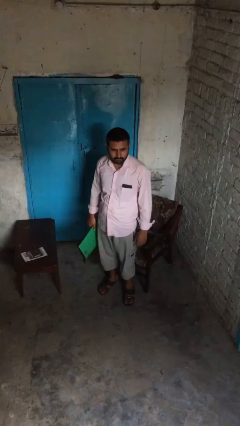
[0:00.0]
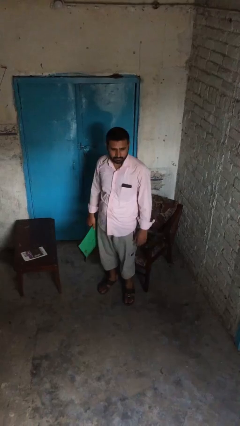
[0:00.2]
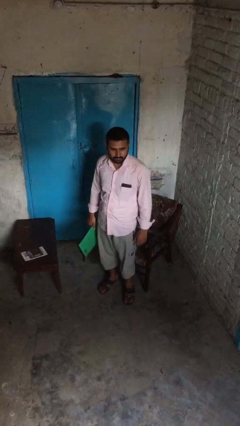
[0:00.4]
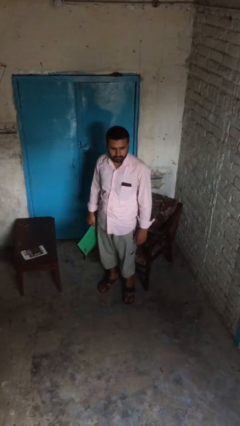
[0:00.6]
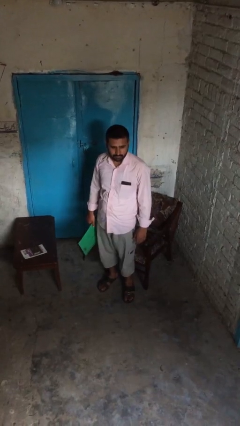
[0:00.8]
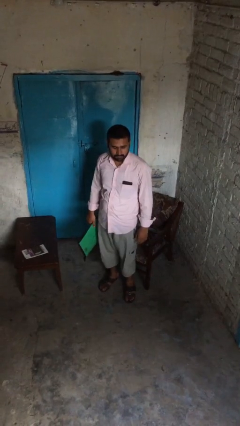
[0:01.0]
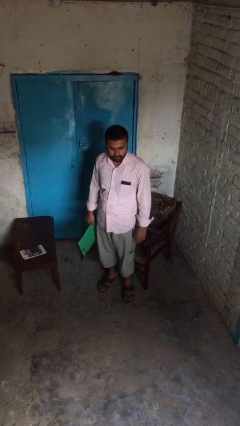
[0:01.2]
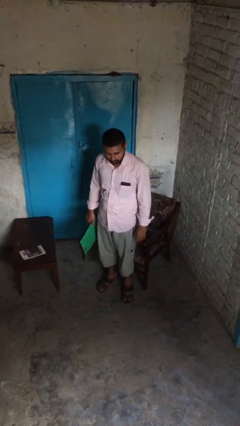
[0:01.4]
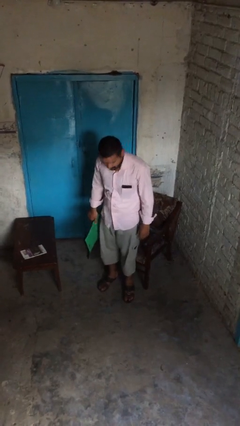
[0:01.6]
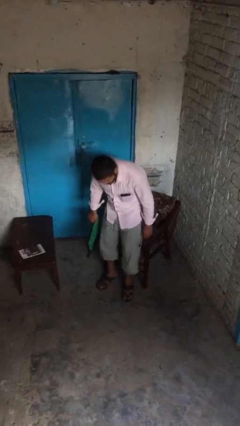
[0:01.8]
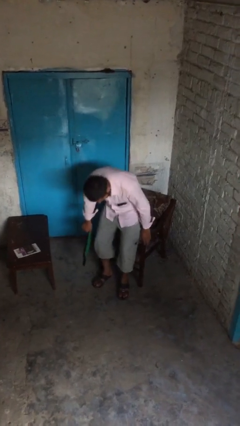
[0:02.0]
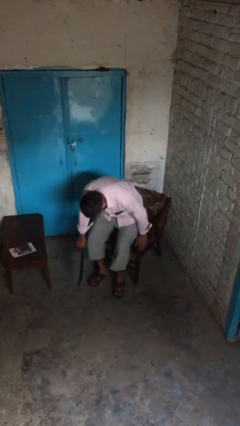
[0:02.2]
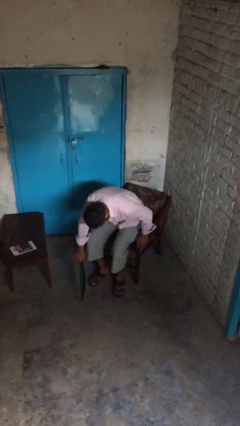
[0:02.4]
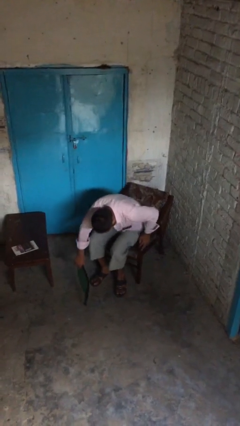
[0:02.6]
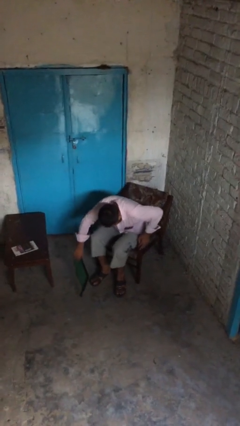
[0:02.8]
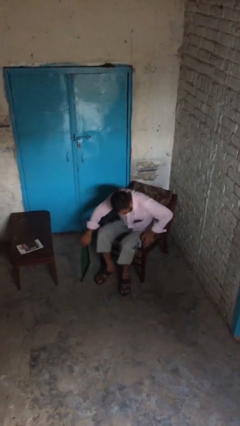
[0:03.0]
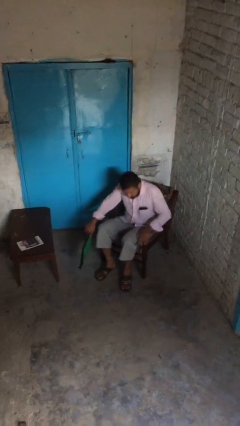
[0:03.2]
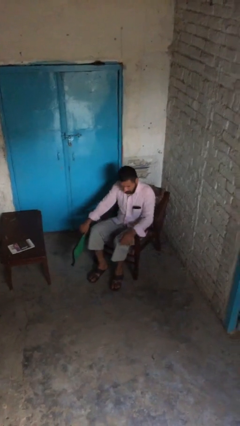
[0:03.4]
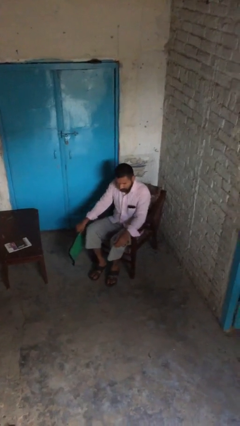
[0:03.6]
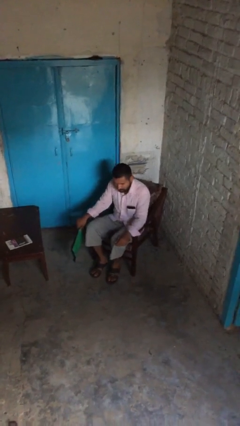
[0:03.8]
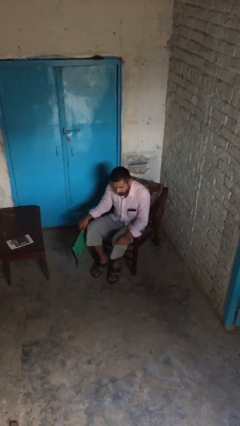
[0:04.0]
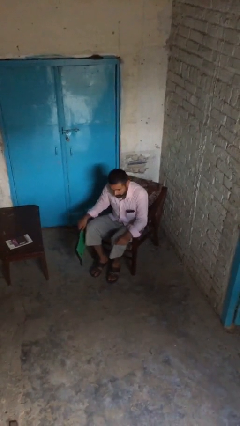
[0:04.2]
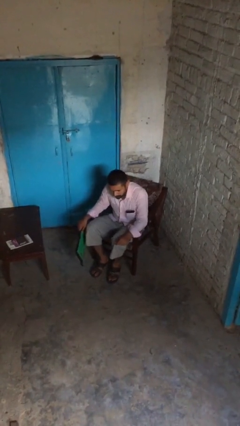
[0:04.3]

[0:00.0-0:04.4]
person sits down

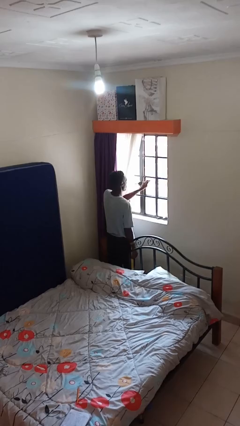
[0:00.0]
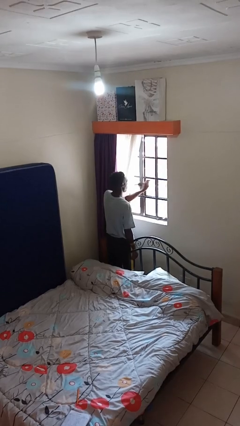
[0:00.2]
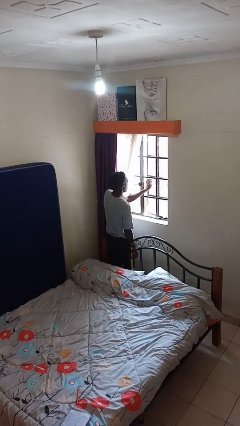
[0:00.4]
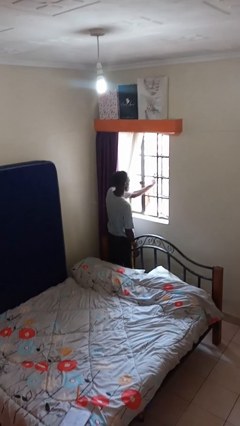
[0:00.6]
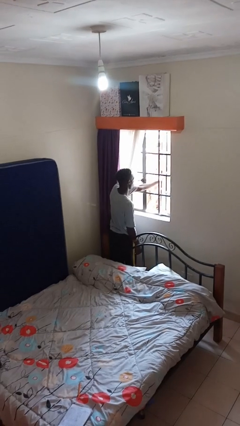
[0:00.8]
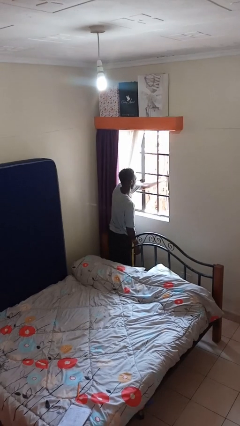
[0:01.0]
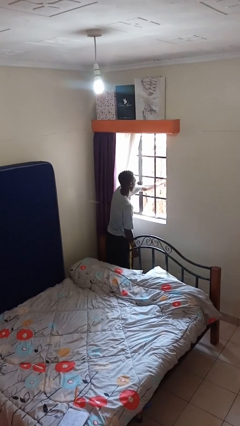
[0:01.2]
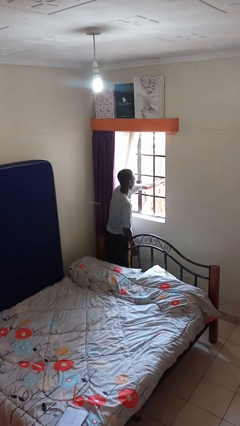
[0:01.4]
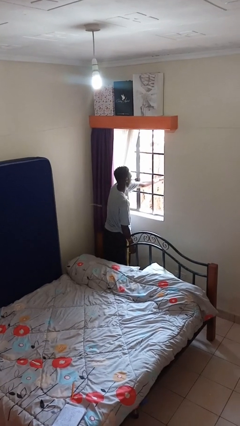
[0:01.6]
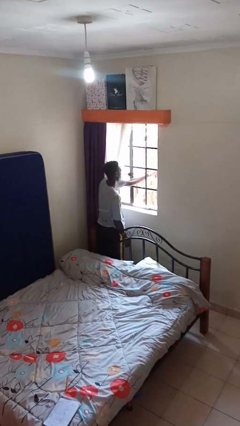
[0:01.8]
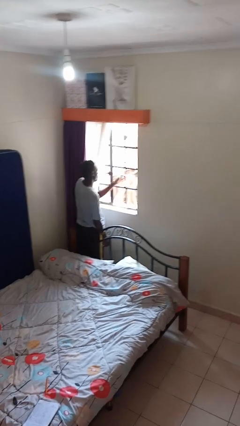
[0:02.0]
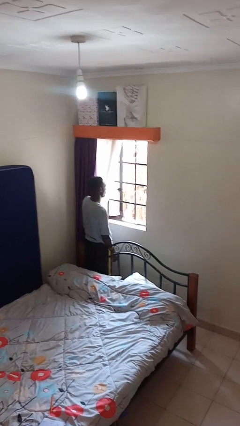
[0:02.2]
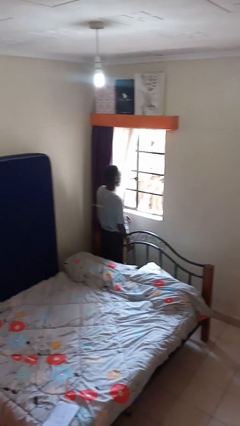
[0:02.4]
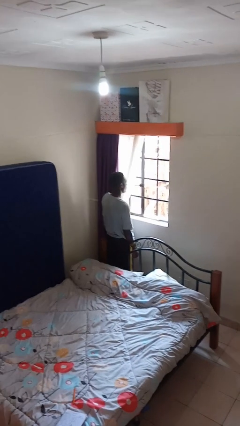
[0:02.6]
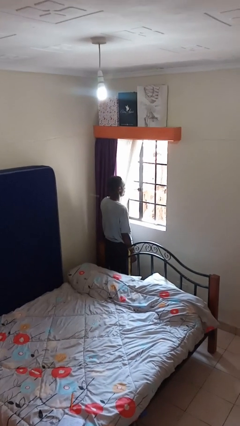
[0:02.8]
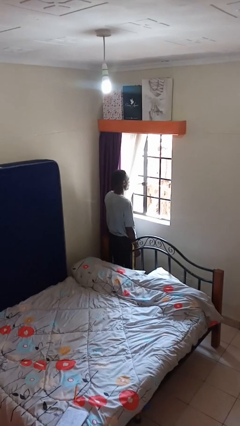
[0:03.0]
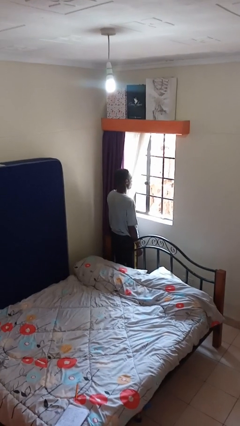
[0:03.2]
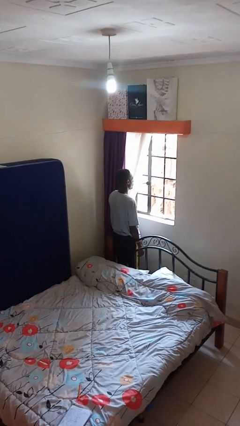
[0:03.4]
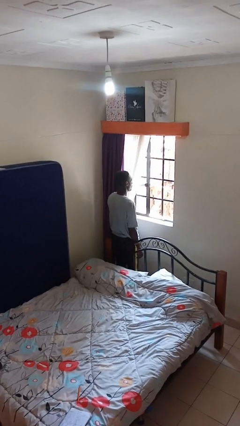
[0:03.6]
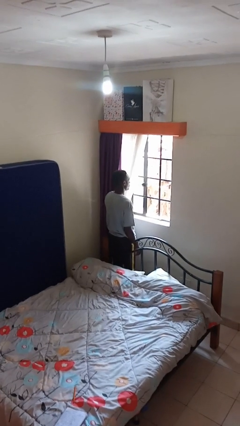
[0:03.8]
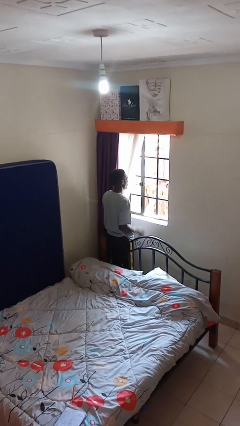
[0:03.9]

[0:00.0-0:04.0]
person opens home window

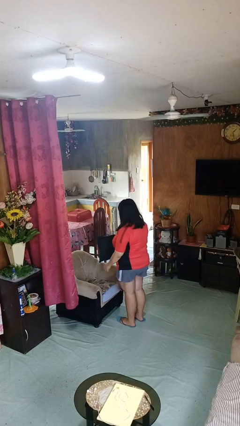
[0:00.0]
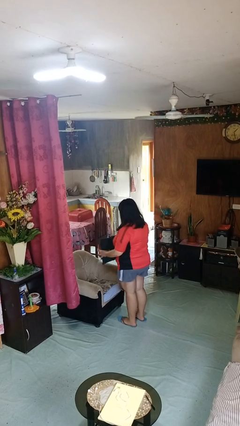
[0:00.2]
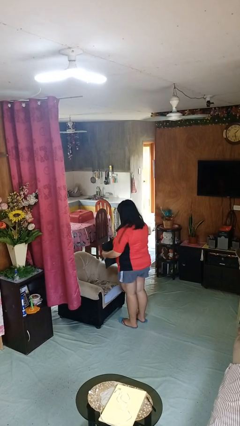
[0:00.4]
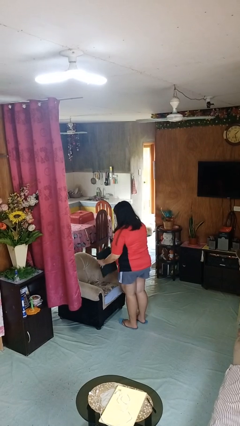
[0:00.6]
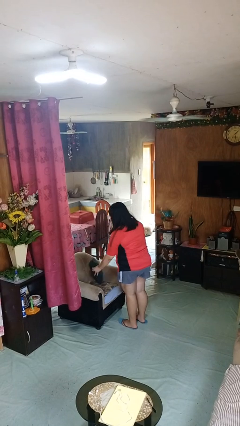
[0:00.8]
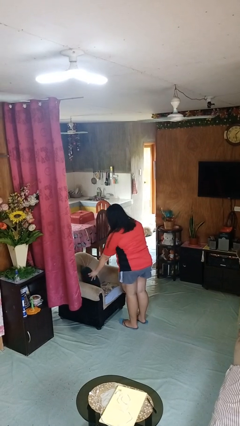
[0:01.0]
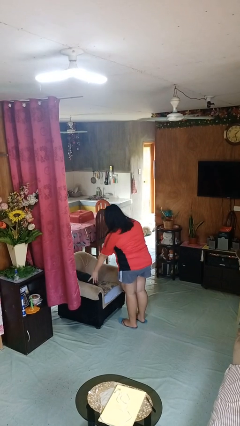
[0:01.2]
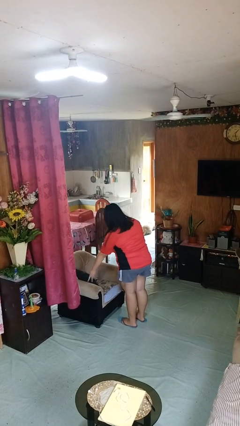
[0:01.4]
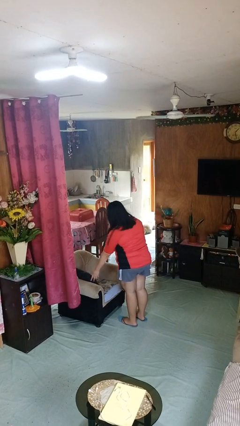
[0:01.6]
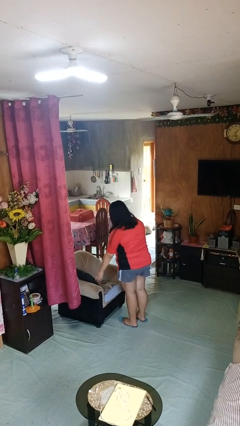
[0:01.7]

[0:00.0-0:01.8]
person puts down object on couch

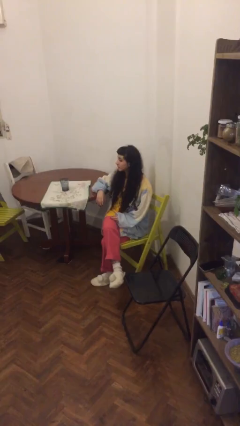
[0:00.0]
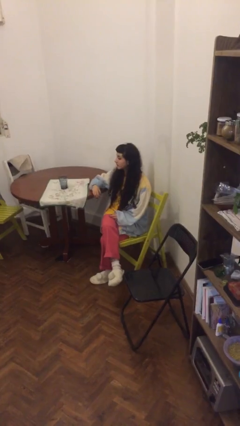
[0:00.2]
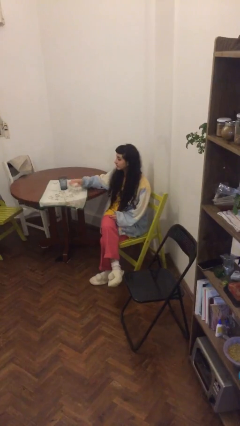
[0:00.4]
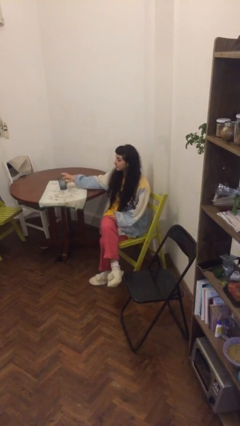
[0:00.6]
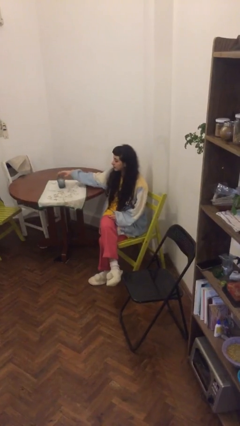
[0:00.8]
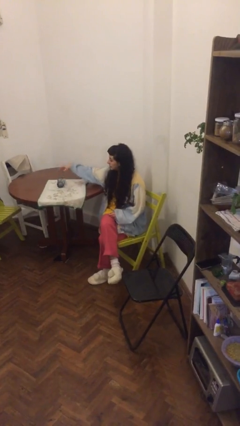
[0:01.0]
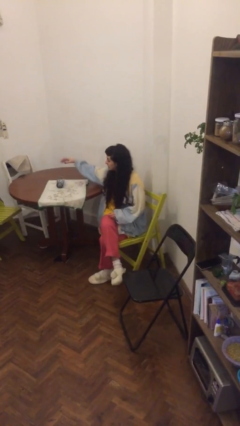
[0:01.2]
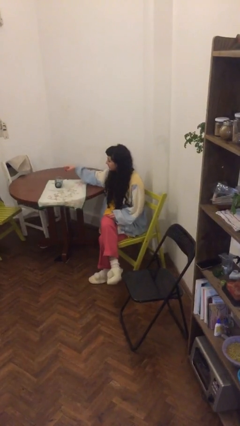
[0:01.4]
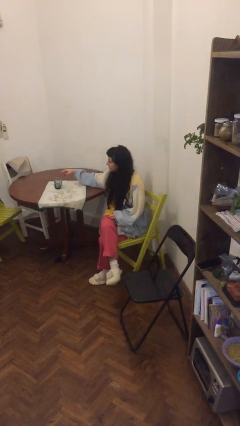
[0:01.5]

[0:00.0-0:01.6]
person knocks over glass

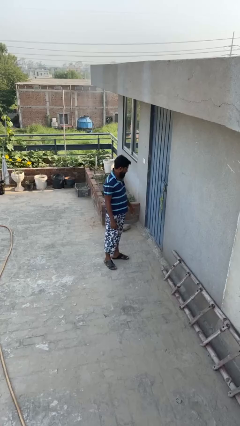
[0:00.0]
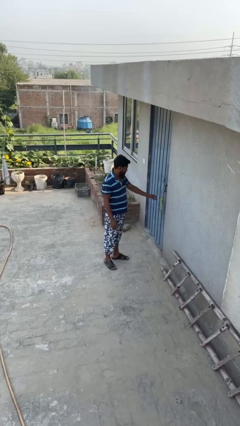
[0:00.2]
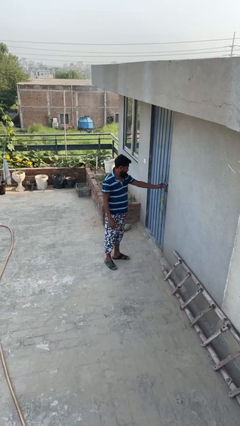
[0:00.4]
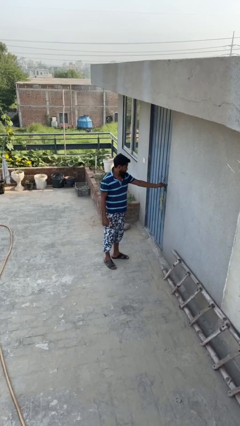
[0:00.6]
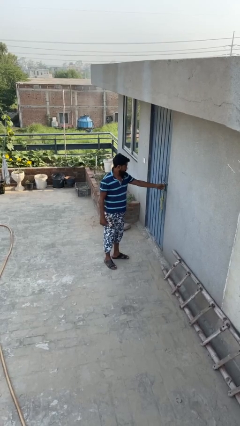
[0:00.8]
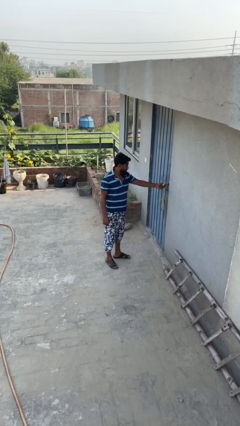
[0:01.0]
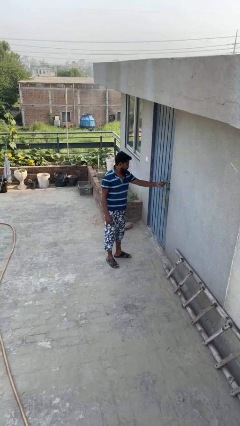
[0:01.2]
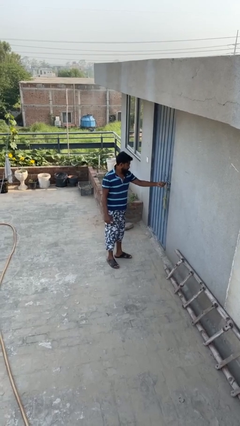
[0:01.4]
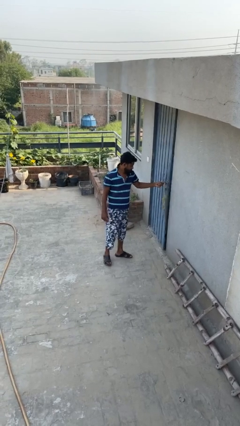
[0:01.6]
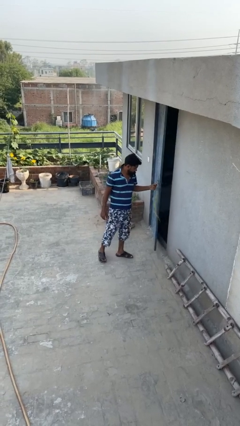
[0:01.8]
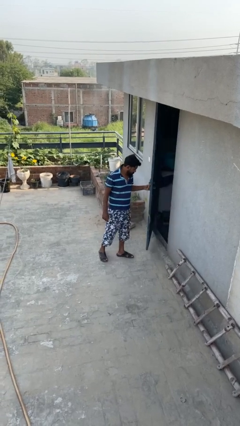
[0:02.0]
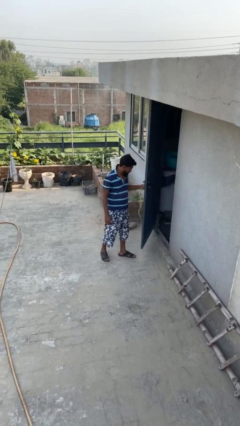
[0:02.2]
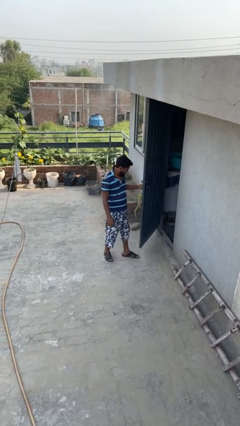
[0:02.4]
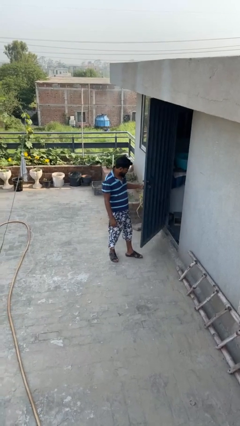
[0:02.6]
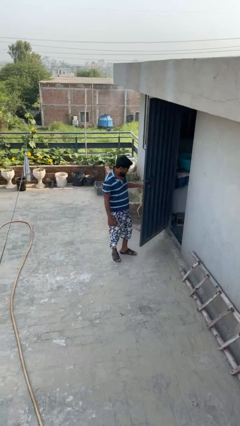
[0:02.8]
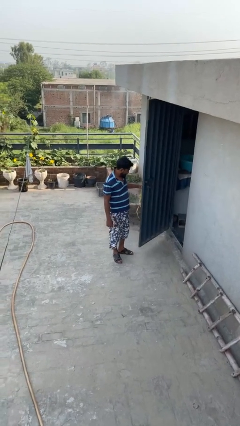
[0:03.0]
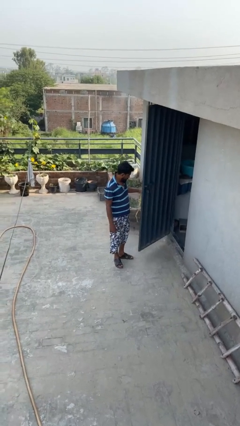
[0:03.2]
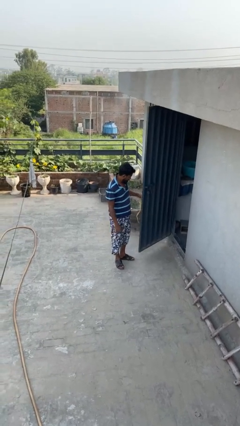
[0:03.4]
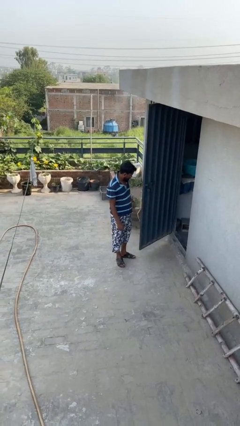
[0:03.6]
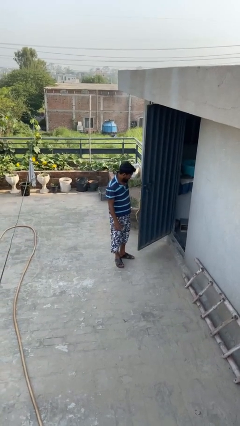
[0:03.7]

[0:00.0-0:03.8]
person opens facility door

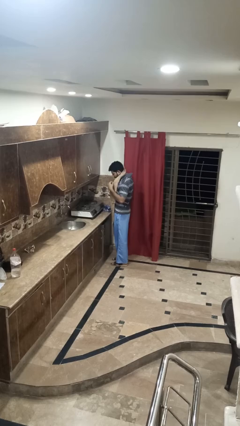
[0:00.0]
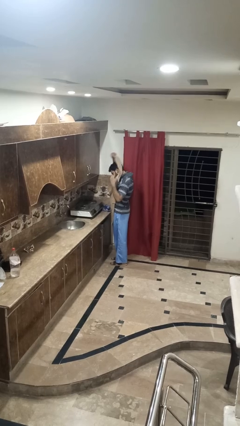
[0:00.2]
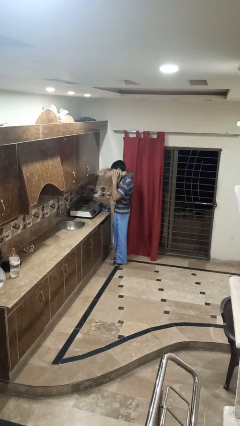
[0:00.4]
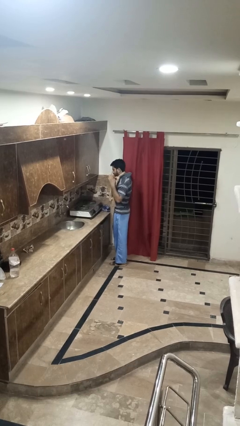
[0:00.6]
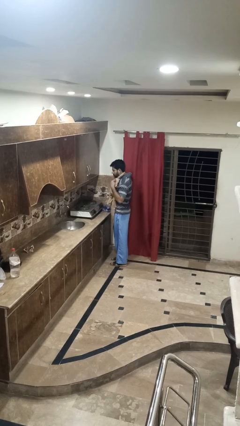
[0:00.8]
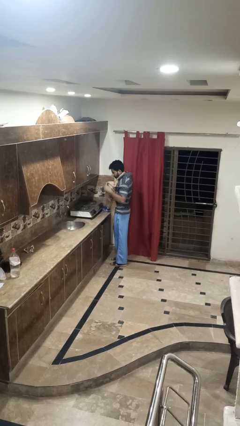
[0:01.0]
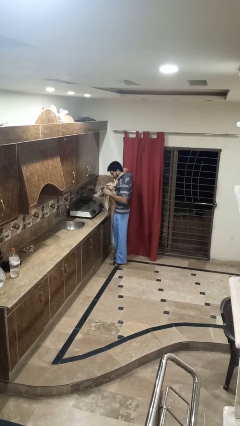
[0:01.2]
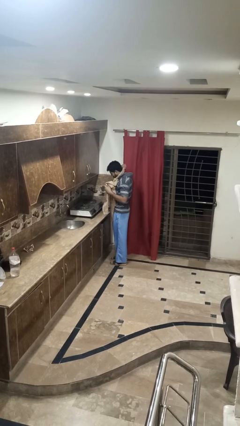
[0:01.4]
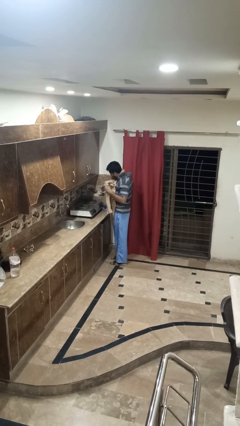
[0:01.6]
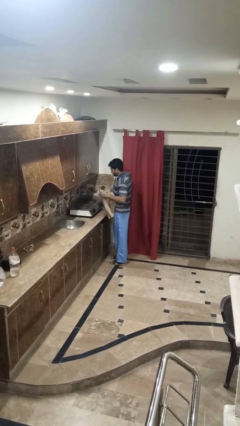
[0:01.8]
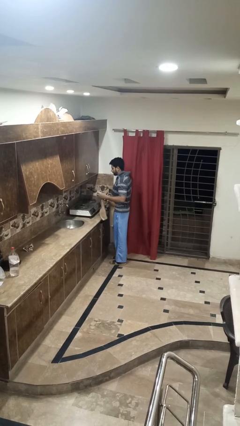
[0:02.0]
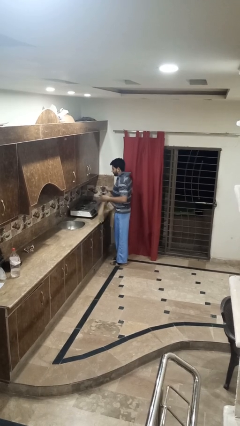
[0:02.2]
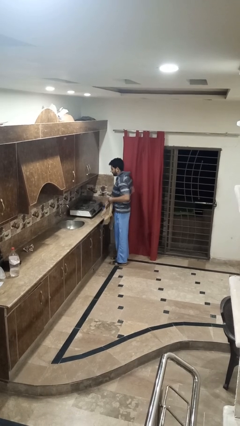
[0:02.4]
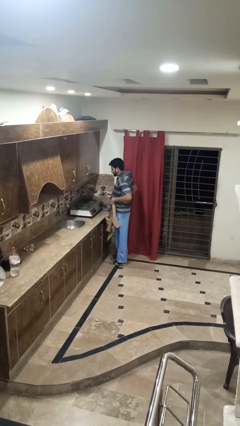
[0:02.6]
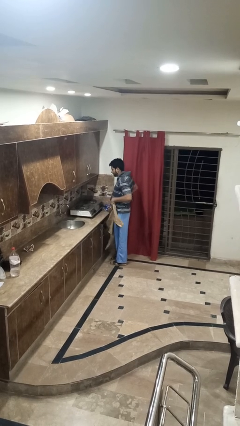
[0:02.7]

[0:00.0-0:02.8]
person takes off apron
